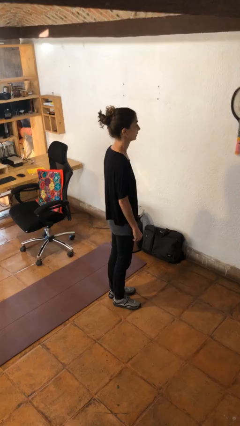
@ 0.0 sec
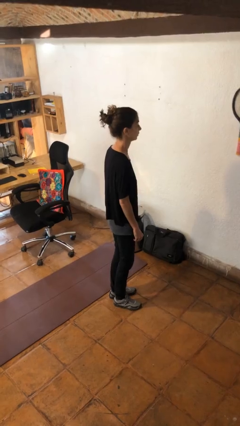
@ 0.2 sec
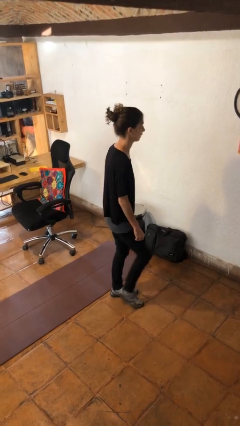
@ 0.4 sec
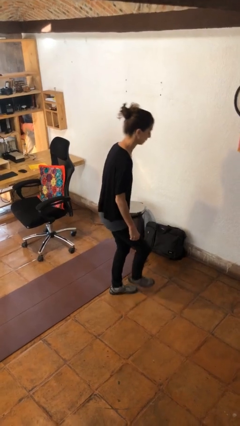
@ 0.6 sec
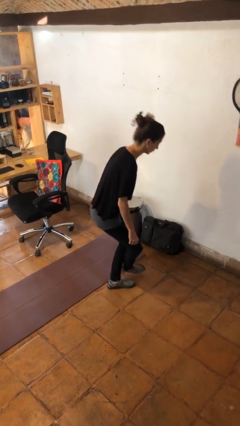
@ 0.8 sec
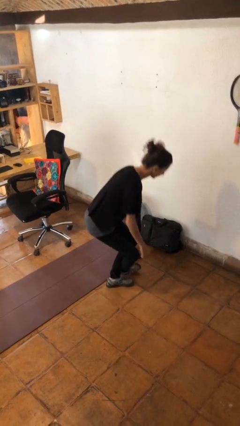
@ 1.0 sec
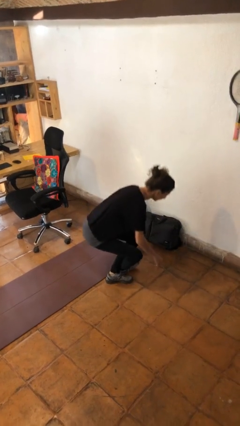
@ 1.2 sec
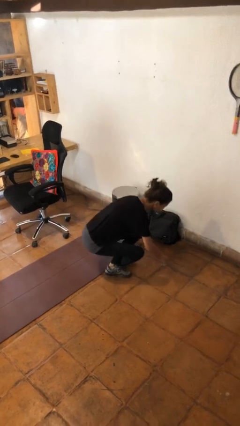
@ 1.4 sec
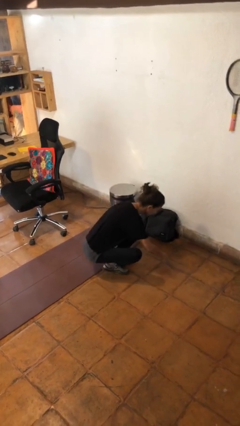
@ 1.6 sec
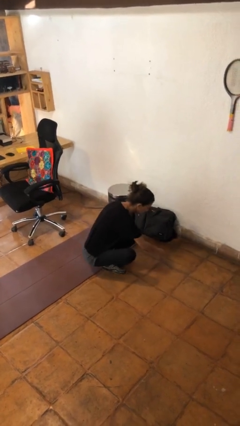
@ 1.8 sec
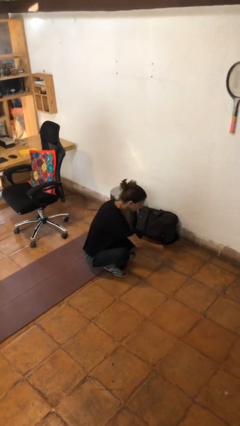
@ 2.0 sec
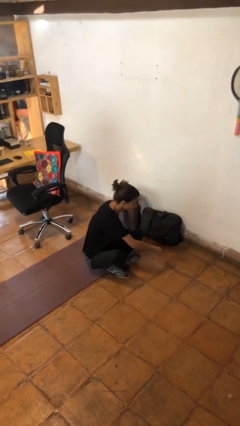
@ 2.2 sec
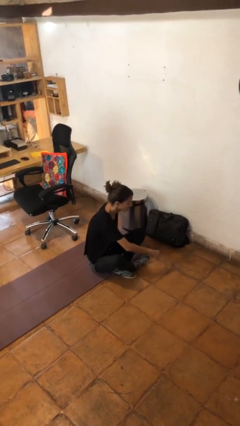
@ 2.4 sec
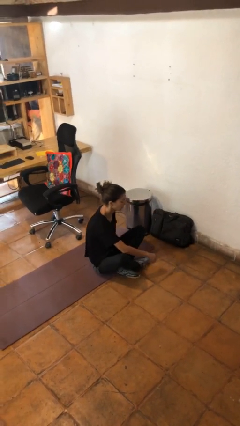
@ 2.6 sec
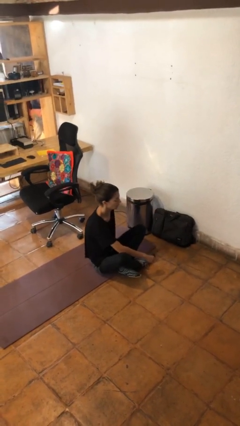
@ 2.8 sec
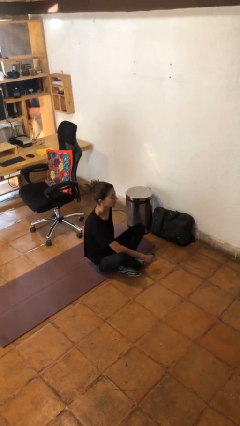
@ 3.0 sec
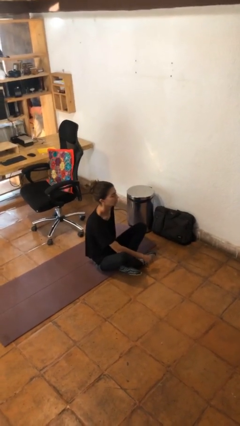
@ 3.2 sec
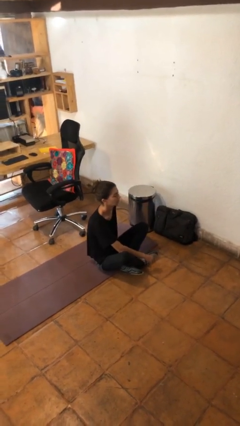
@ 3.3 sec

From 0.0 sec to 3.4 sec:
person sits crisscross

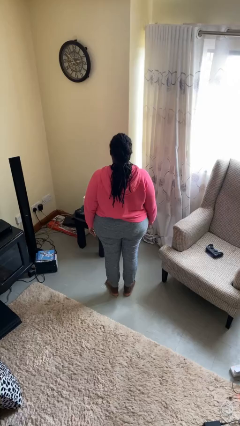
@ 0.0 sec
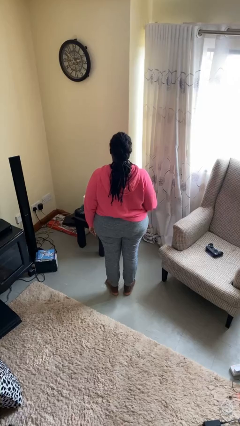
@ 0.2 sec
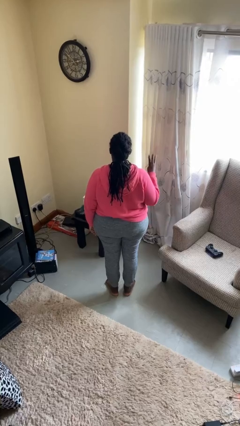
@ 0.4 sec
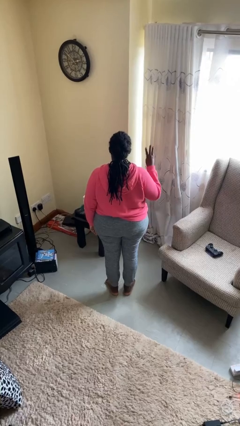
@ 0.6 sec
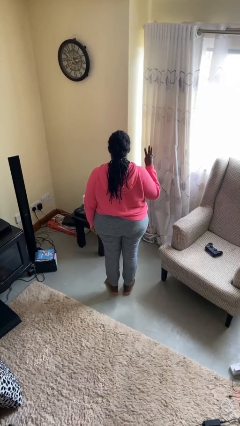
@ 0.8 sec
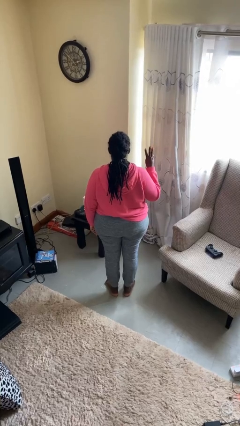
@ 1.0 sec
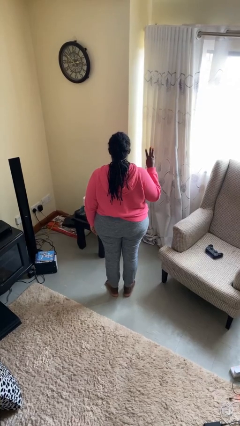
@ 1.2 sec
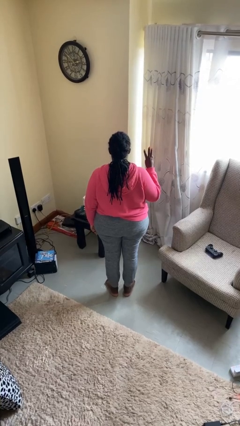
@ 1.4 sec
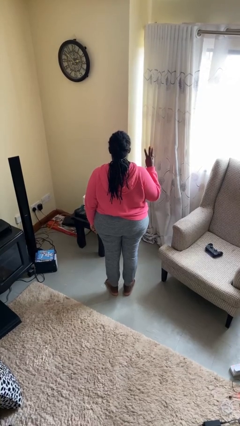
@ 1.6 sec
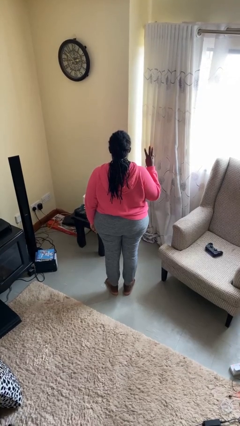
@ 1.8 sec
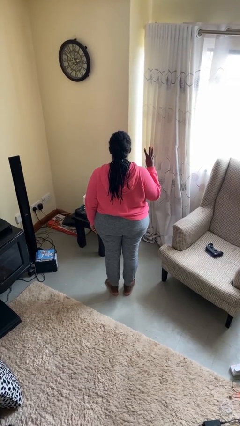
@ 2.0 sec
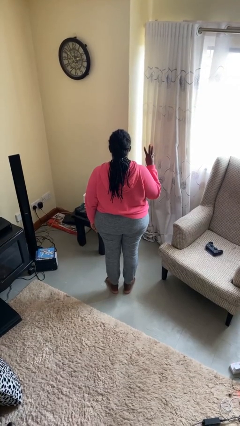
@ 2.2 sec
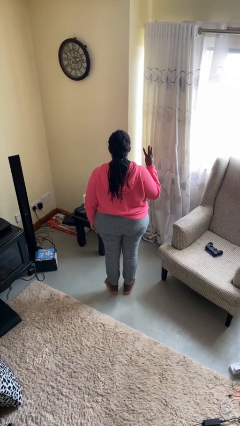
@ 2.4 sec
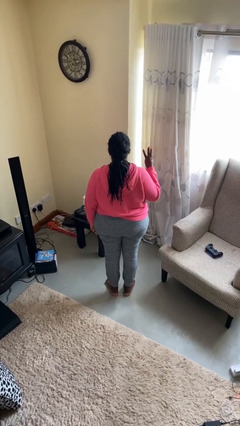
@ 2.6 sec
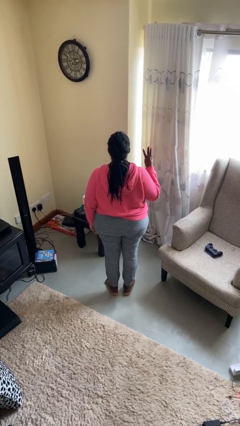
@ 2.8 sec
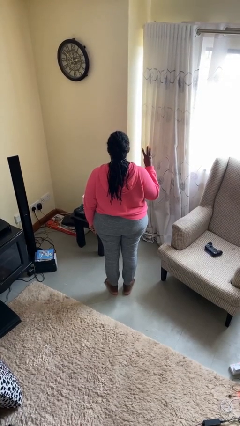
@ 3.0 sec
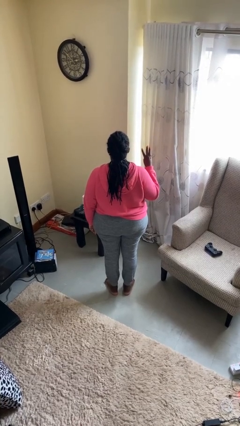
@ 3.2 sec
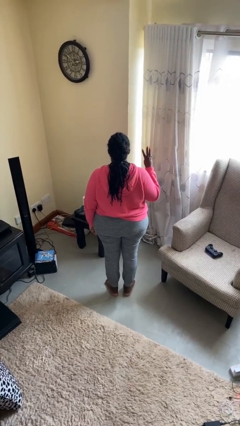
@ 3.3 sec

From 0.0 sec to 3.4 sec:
person gestures number three

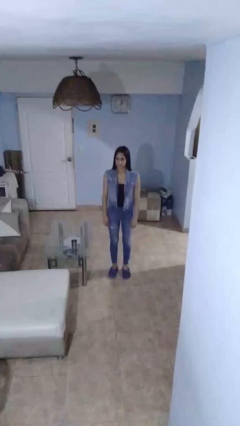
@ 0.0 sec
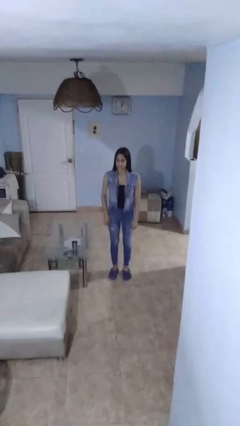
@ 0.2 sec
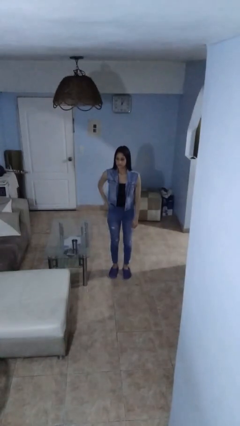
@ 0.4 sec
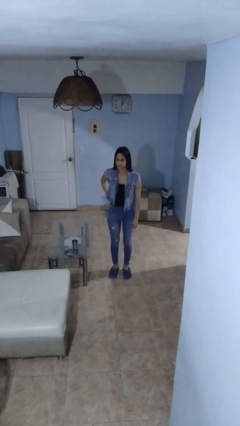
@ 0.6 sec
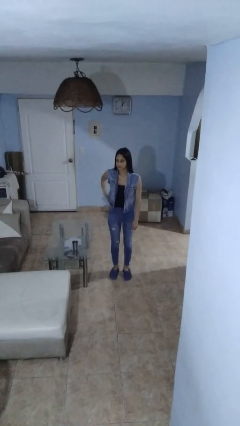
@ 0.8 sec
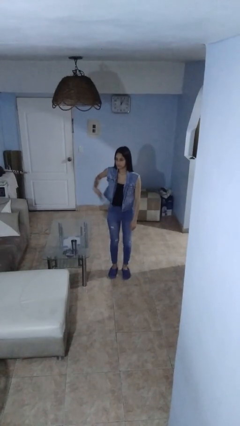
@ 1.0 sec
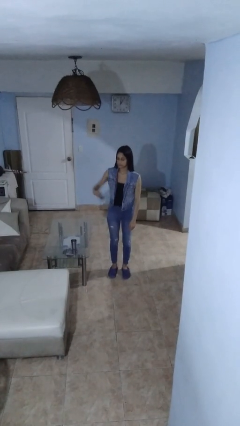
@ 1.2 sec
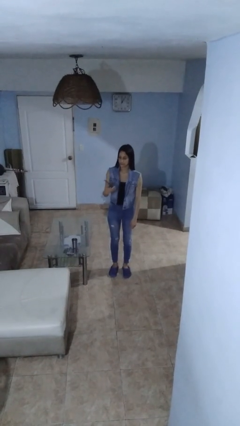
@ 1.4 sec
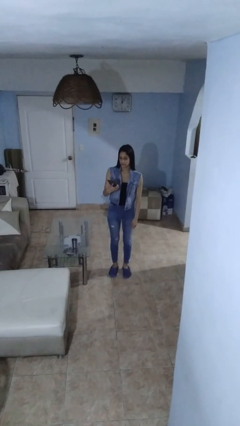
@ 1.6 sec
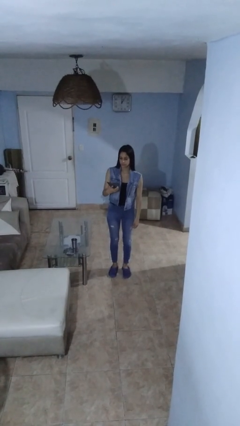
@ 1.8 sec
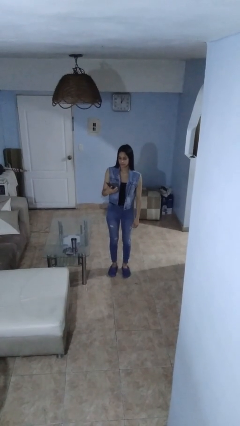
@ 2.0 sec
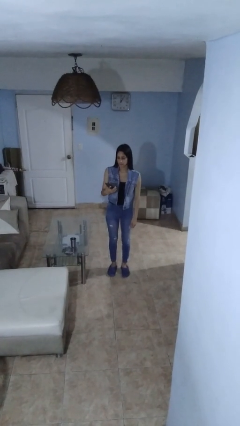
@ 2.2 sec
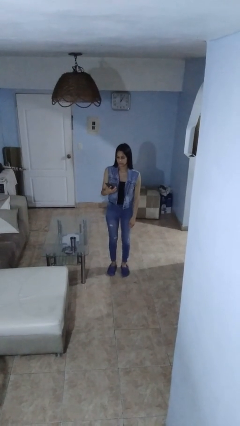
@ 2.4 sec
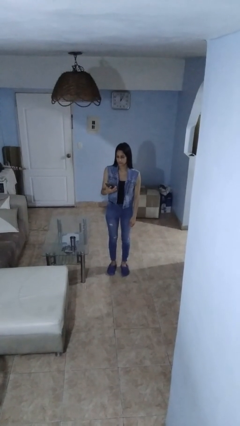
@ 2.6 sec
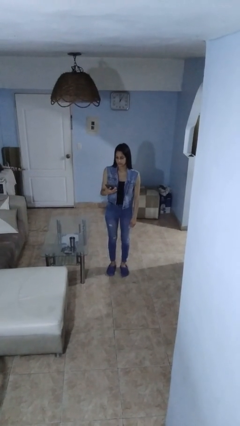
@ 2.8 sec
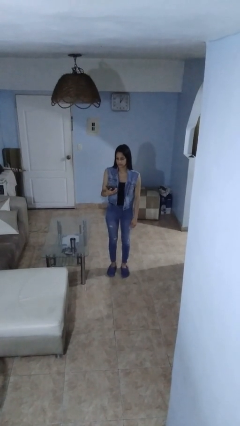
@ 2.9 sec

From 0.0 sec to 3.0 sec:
person takes phone from pocket

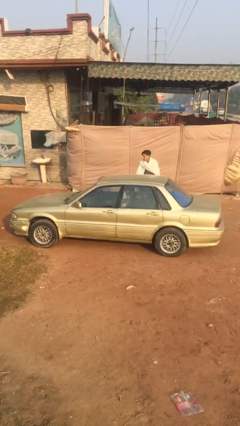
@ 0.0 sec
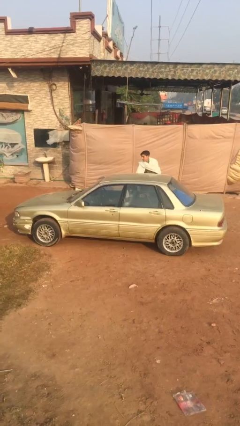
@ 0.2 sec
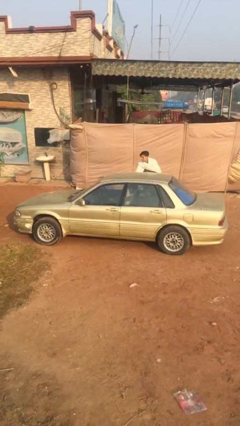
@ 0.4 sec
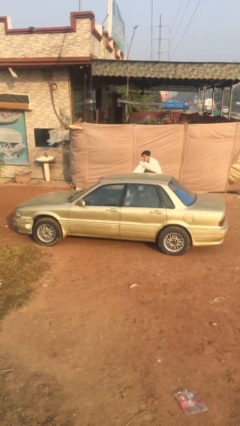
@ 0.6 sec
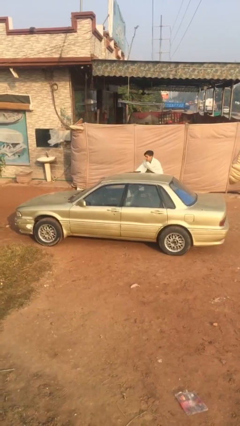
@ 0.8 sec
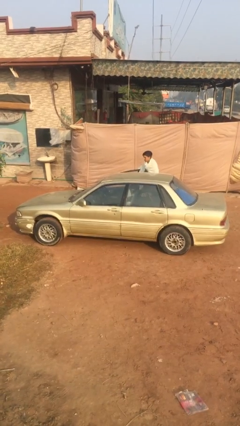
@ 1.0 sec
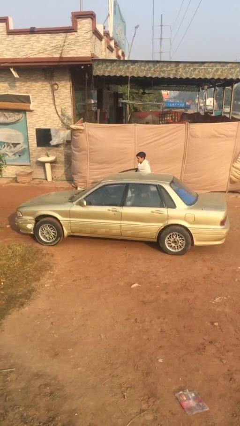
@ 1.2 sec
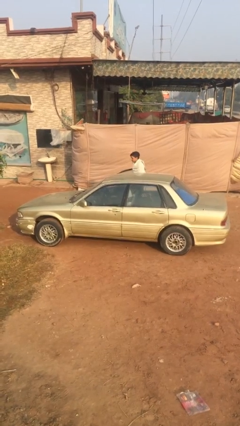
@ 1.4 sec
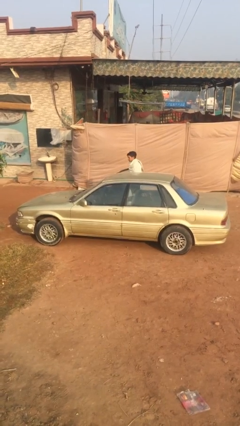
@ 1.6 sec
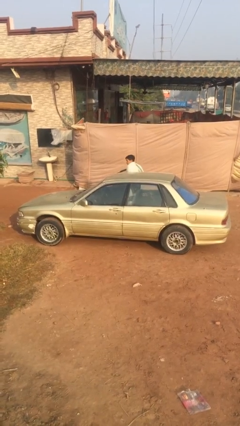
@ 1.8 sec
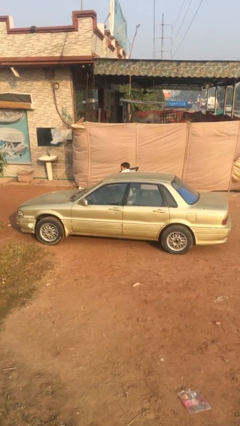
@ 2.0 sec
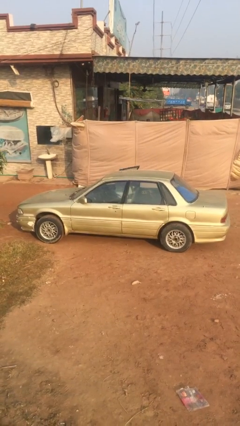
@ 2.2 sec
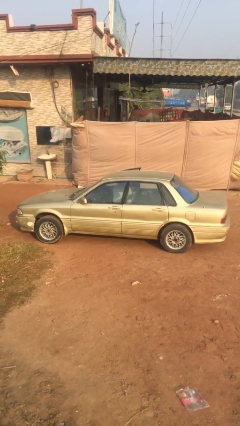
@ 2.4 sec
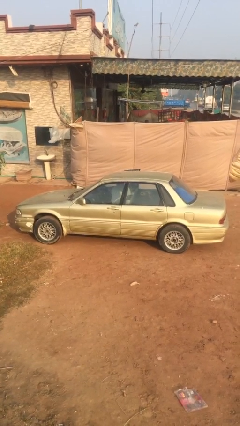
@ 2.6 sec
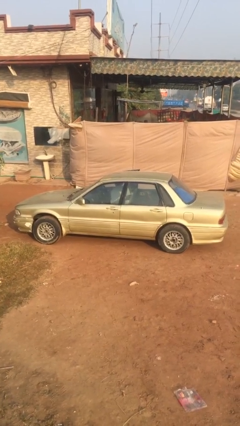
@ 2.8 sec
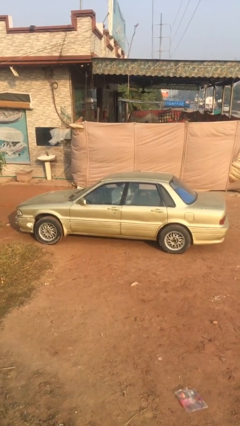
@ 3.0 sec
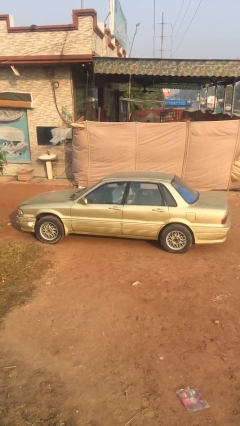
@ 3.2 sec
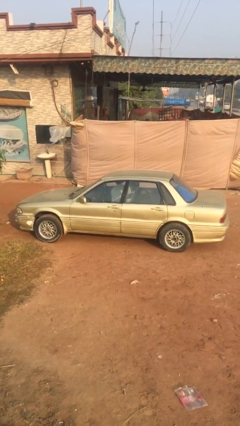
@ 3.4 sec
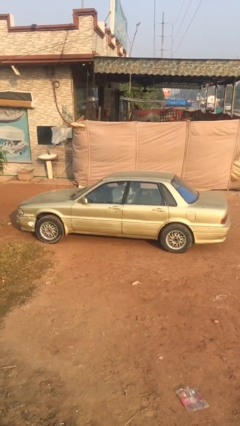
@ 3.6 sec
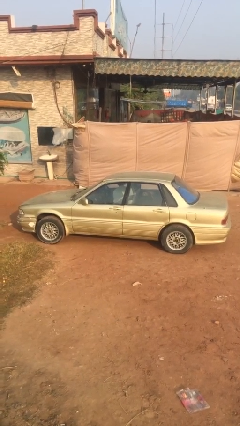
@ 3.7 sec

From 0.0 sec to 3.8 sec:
car picks up person

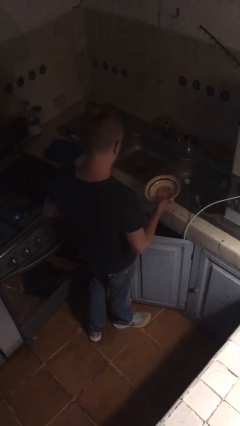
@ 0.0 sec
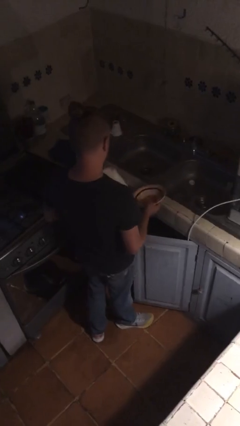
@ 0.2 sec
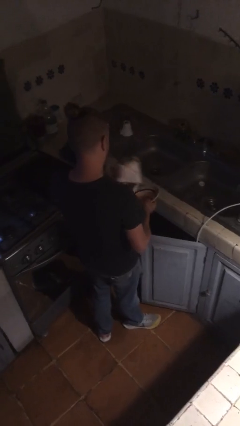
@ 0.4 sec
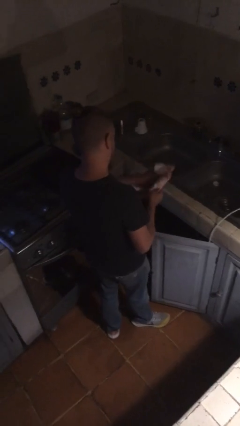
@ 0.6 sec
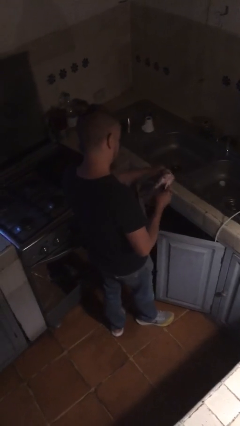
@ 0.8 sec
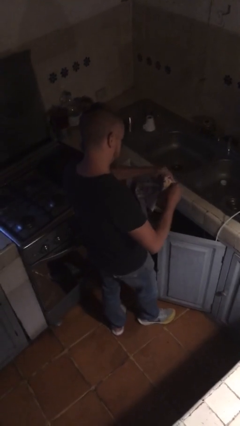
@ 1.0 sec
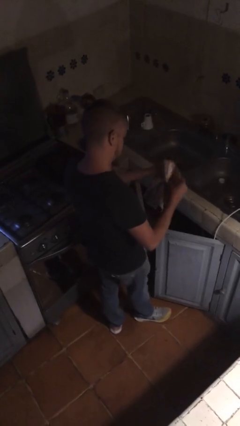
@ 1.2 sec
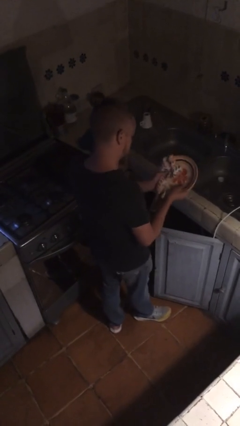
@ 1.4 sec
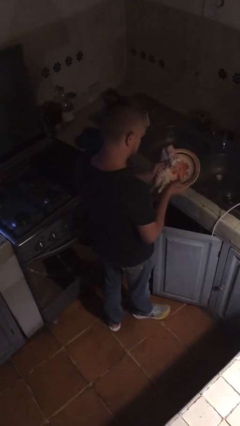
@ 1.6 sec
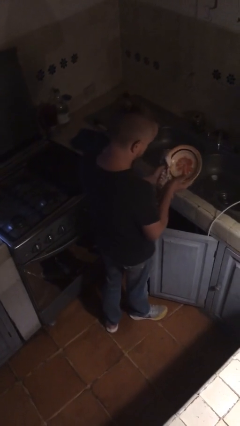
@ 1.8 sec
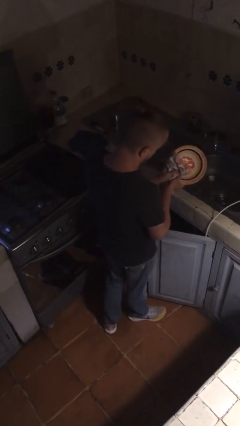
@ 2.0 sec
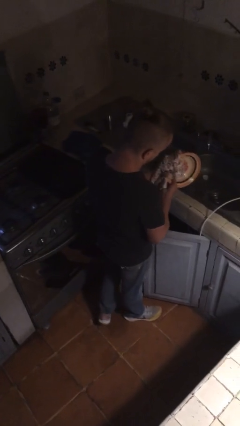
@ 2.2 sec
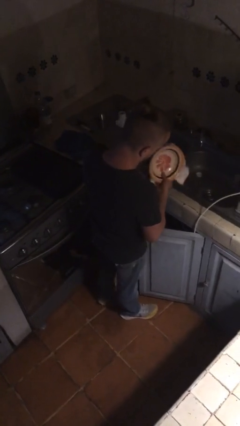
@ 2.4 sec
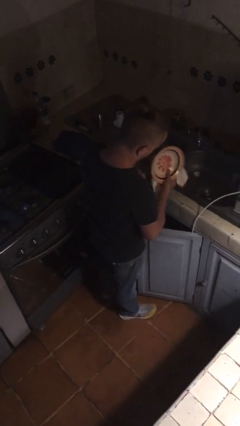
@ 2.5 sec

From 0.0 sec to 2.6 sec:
person dries dish

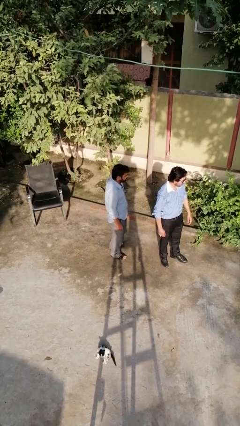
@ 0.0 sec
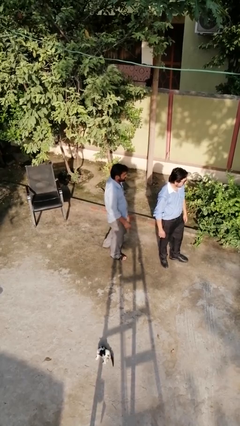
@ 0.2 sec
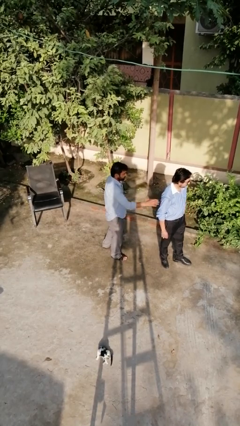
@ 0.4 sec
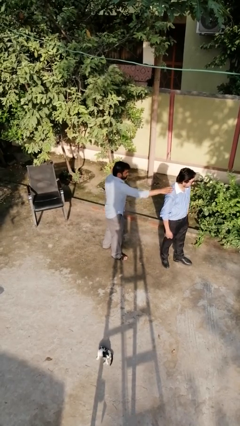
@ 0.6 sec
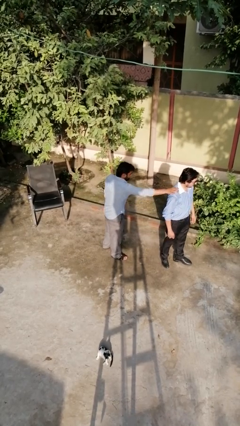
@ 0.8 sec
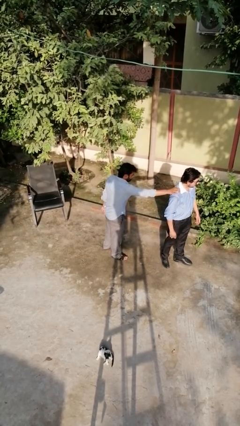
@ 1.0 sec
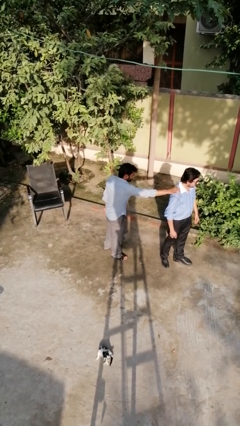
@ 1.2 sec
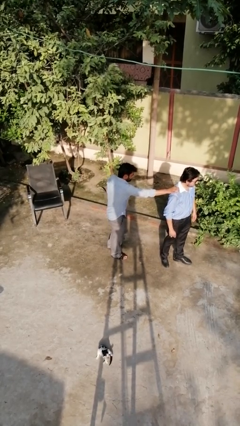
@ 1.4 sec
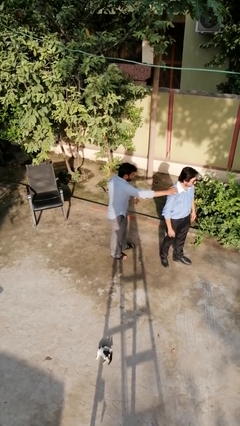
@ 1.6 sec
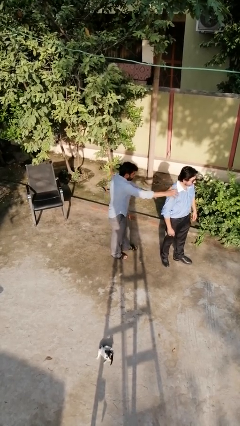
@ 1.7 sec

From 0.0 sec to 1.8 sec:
person grabs person by shoulder
